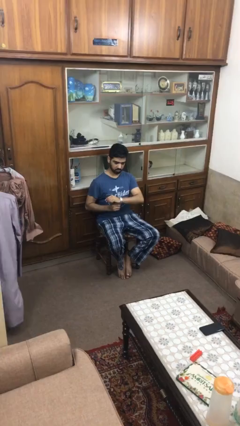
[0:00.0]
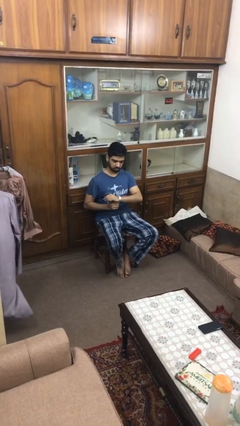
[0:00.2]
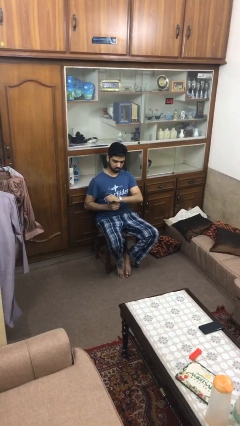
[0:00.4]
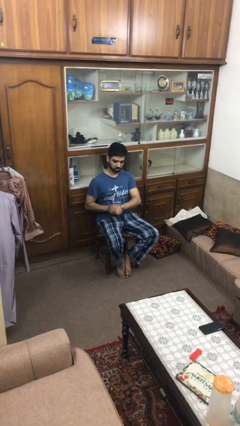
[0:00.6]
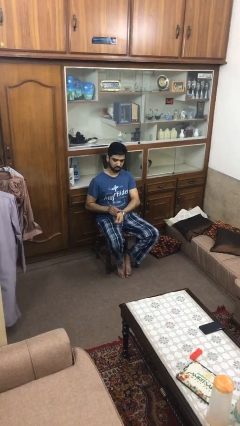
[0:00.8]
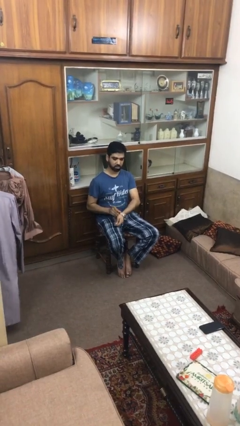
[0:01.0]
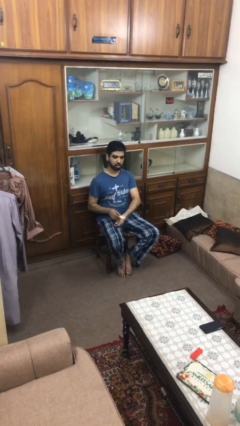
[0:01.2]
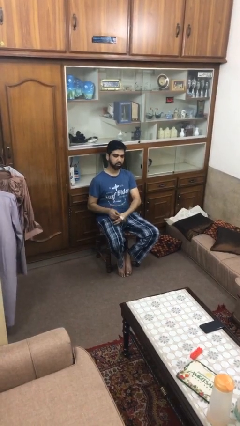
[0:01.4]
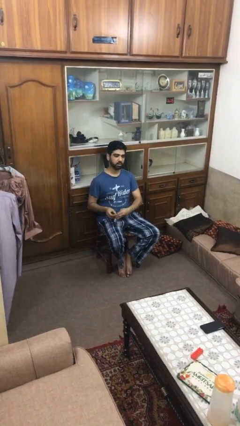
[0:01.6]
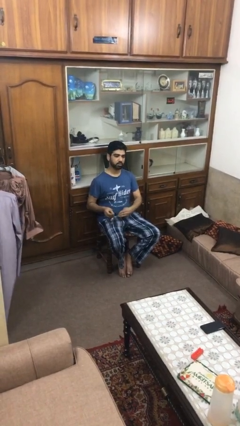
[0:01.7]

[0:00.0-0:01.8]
person takes off wristwatch

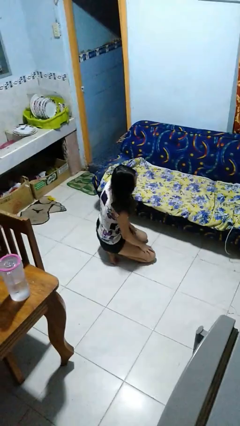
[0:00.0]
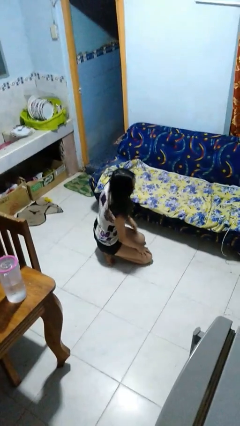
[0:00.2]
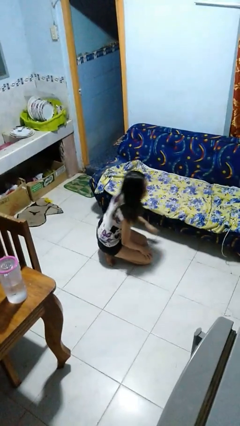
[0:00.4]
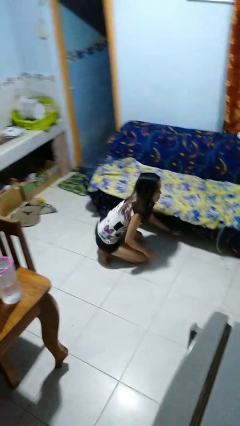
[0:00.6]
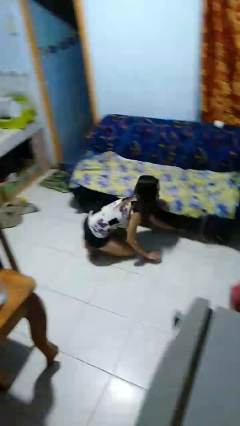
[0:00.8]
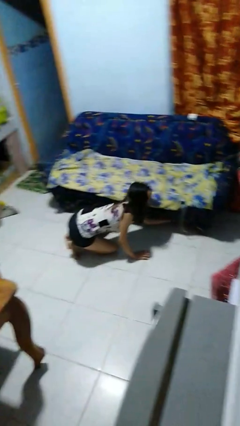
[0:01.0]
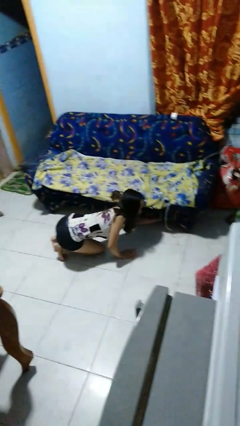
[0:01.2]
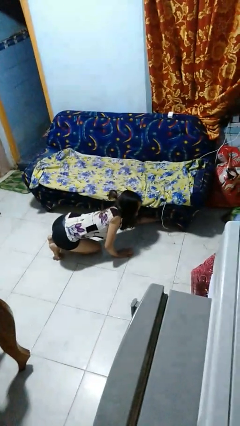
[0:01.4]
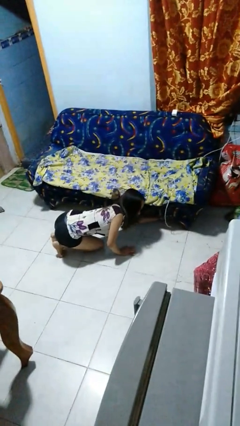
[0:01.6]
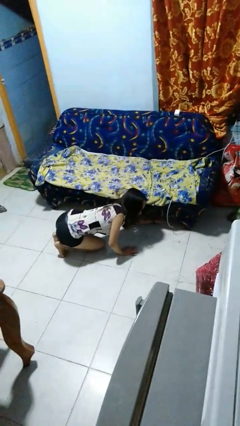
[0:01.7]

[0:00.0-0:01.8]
person searches under couch

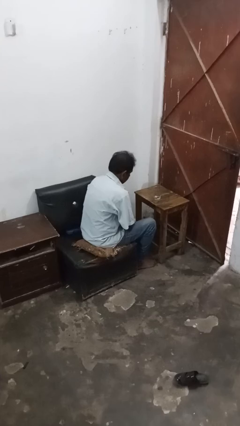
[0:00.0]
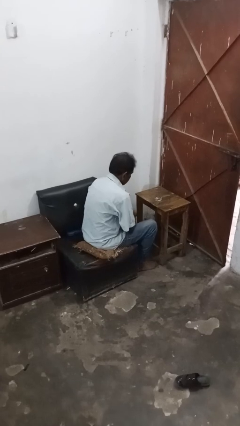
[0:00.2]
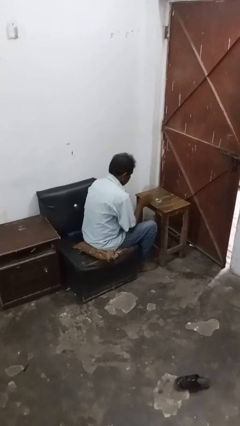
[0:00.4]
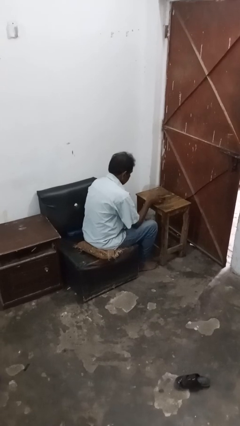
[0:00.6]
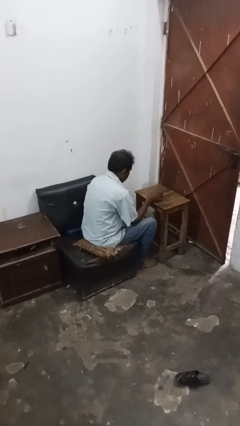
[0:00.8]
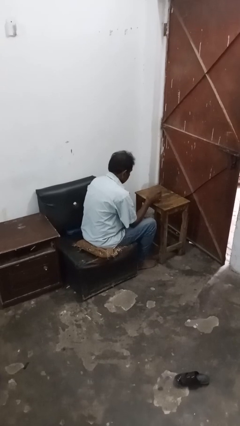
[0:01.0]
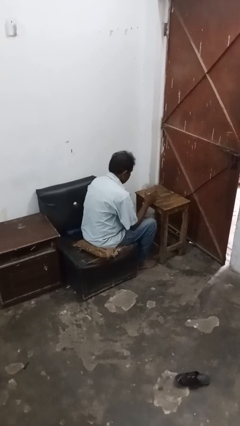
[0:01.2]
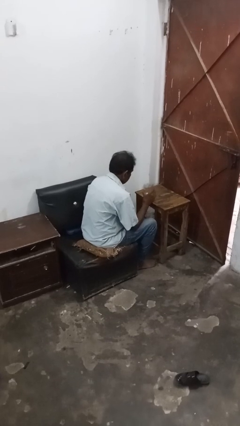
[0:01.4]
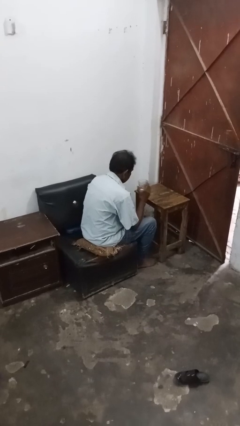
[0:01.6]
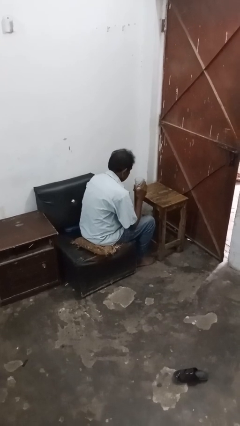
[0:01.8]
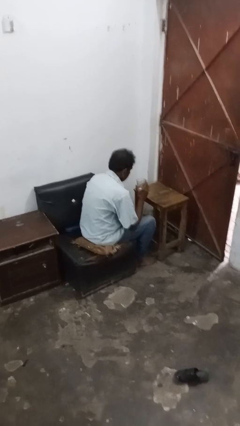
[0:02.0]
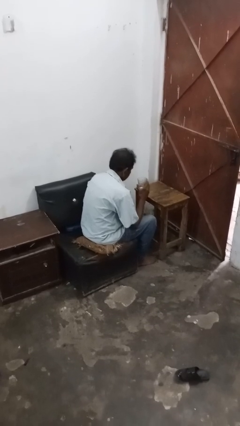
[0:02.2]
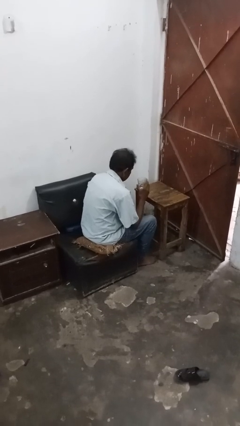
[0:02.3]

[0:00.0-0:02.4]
person picks up object from table

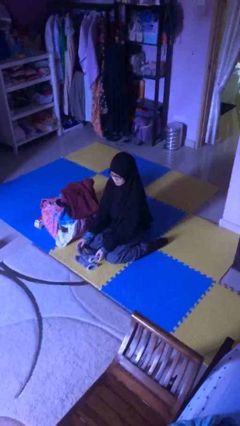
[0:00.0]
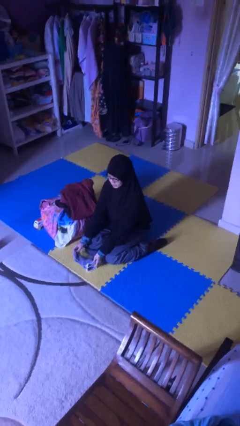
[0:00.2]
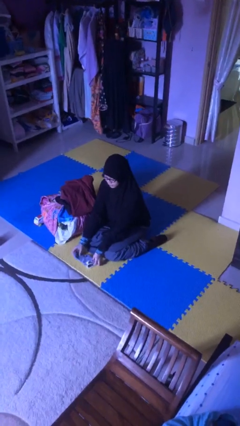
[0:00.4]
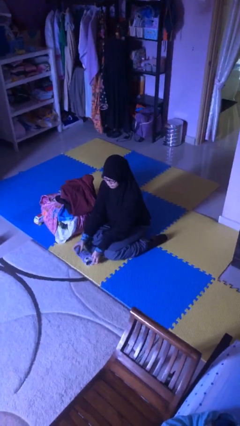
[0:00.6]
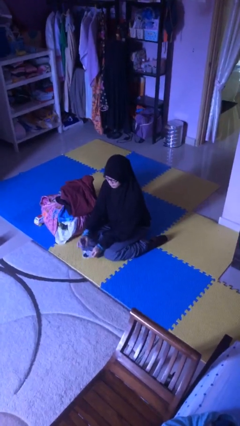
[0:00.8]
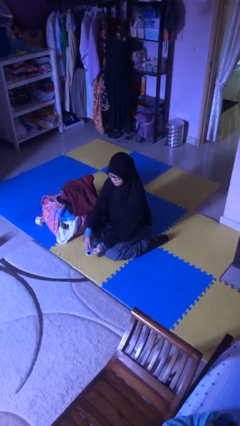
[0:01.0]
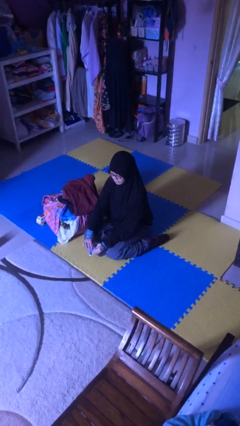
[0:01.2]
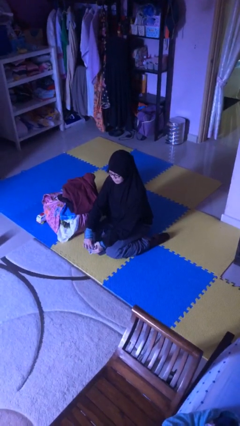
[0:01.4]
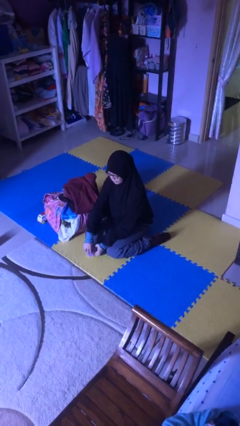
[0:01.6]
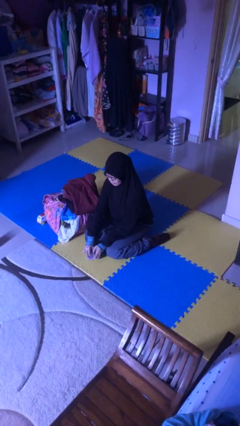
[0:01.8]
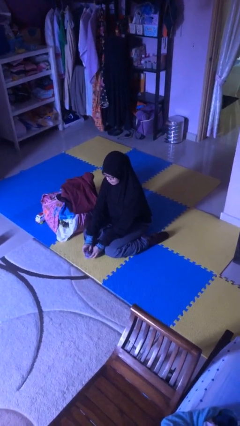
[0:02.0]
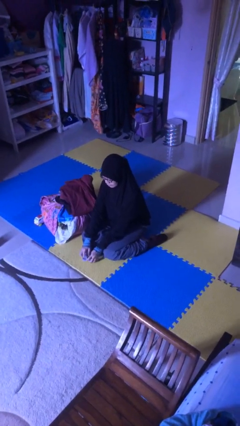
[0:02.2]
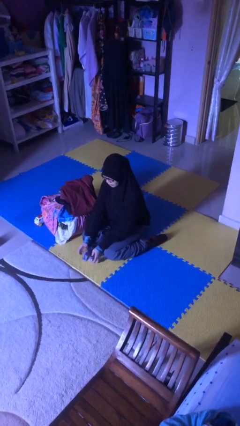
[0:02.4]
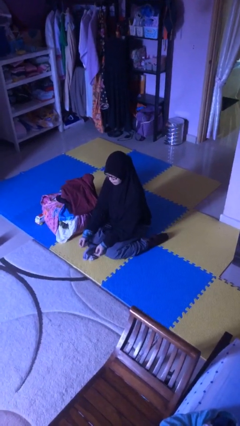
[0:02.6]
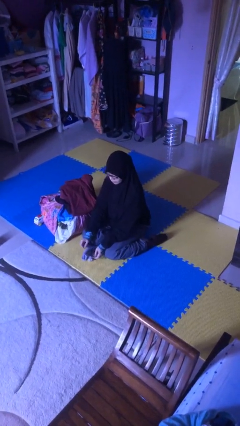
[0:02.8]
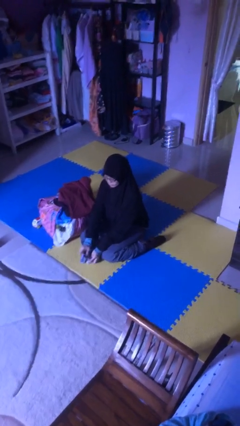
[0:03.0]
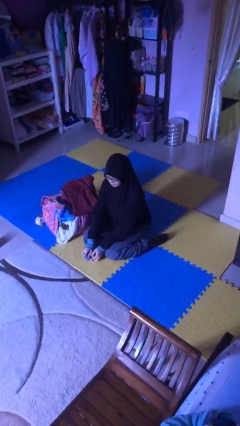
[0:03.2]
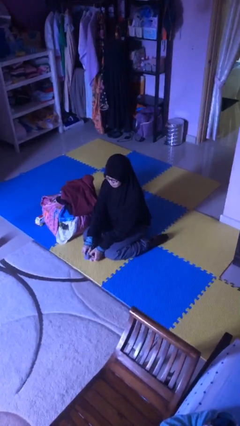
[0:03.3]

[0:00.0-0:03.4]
person folds socks

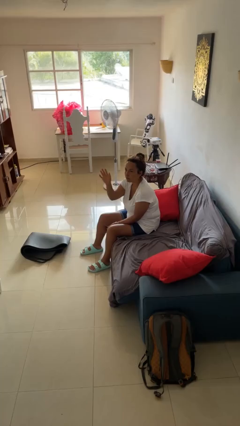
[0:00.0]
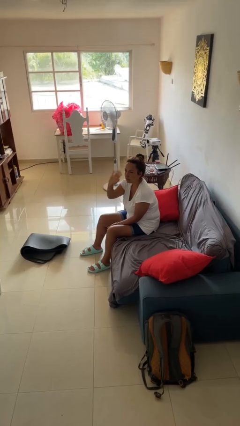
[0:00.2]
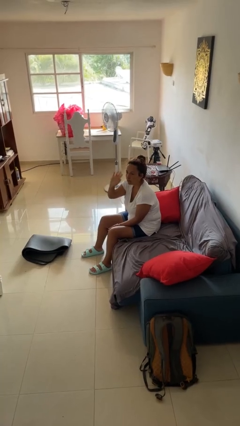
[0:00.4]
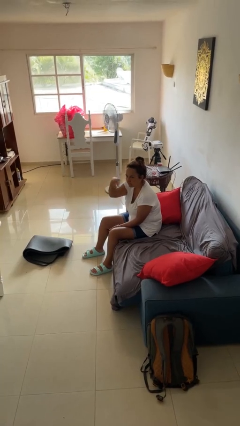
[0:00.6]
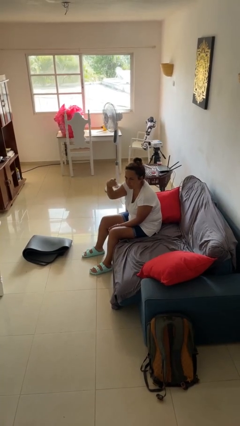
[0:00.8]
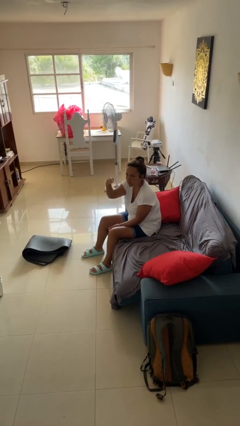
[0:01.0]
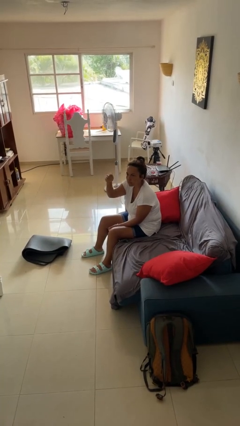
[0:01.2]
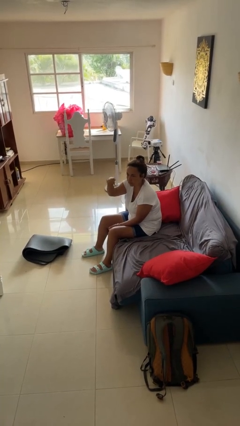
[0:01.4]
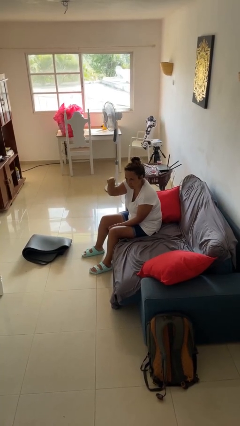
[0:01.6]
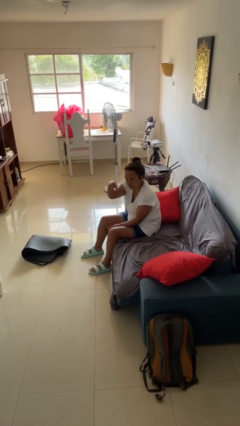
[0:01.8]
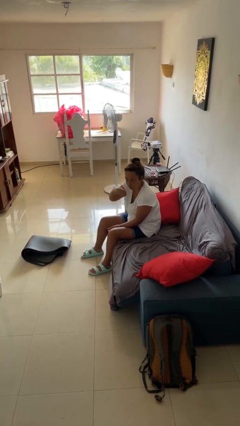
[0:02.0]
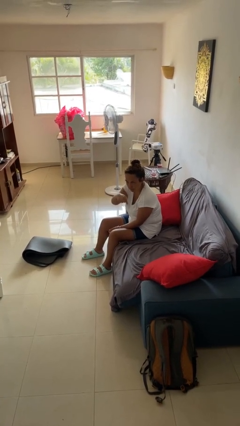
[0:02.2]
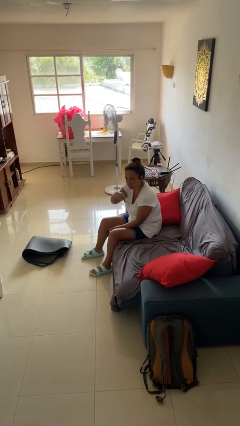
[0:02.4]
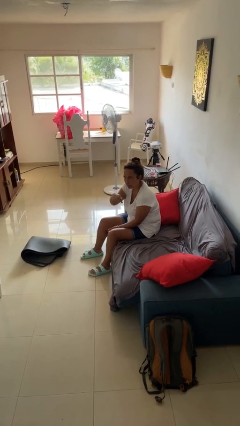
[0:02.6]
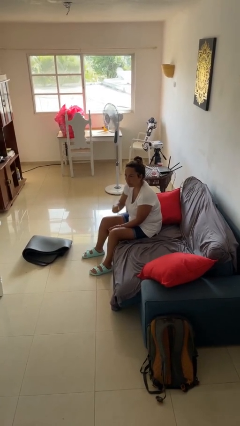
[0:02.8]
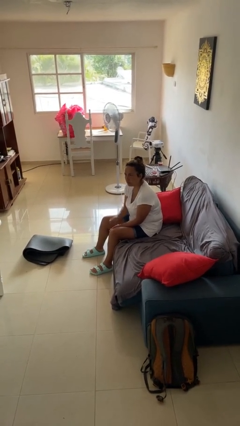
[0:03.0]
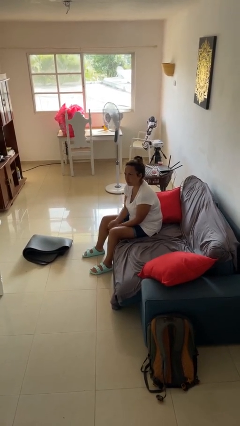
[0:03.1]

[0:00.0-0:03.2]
person gestures come here

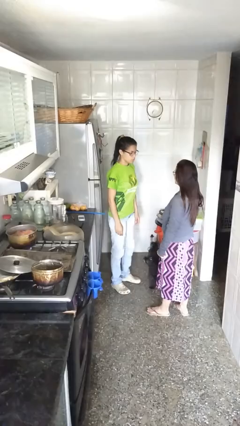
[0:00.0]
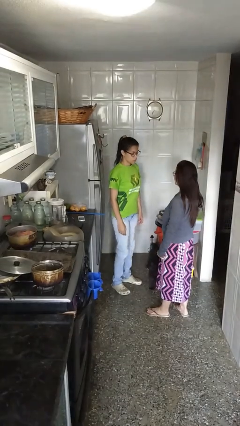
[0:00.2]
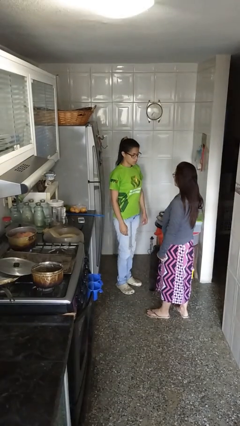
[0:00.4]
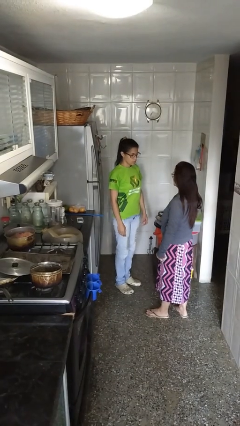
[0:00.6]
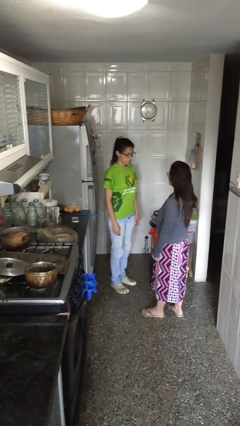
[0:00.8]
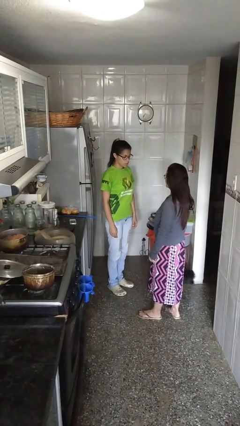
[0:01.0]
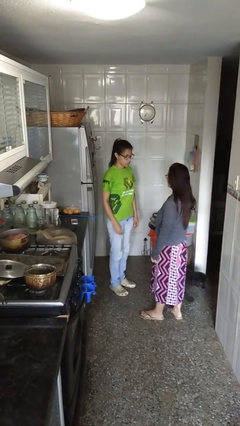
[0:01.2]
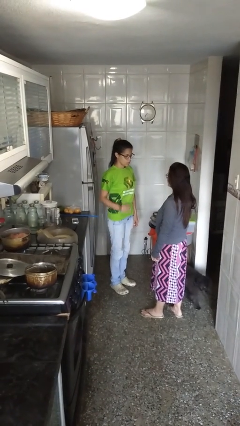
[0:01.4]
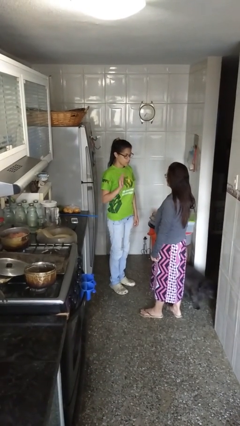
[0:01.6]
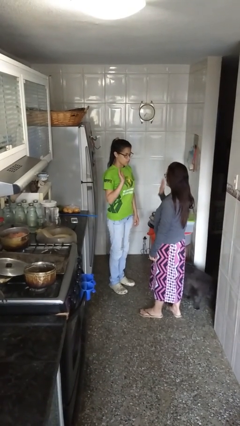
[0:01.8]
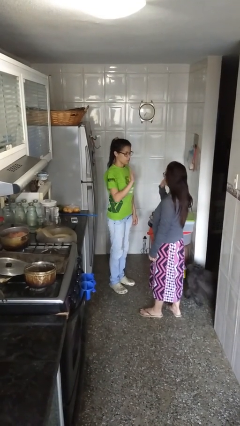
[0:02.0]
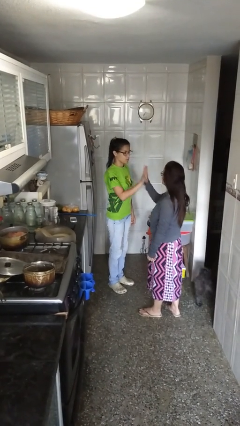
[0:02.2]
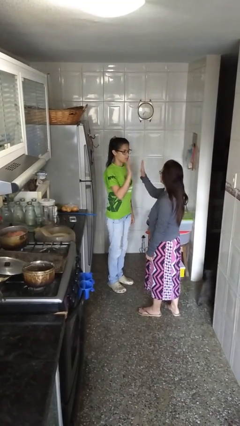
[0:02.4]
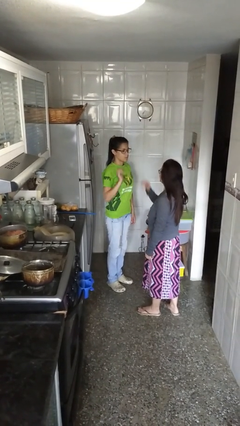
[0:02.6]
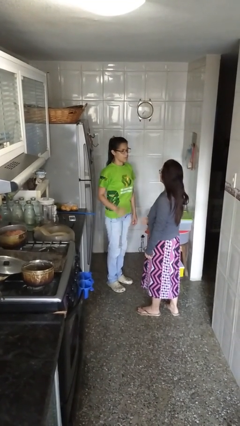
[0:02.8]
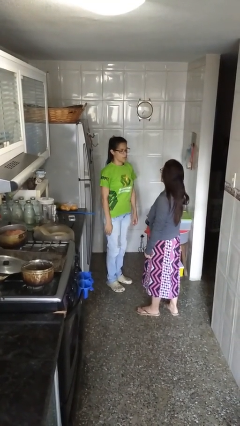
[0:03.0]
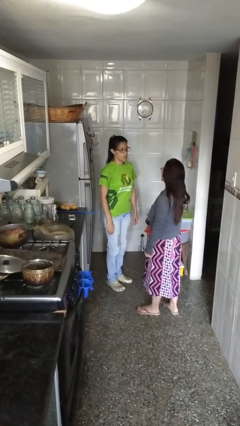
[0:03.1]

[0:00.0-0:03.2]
person highfives hand

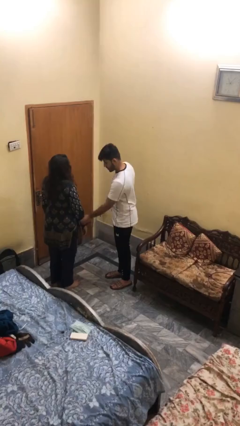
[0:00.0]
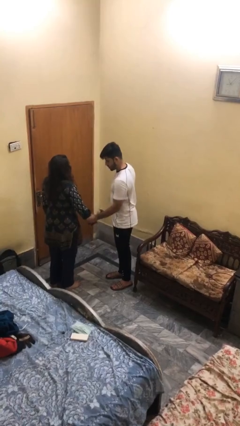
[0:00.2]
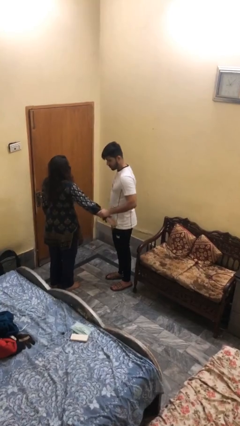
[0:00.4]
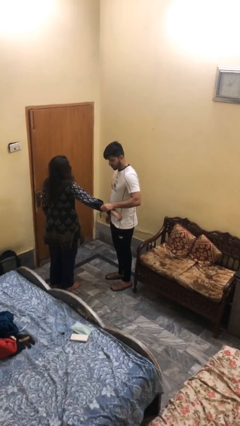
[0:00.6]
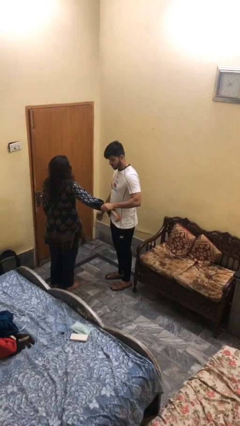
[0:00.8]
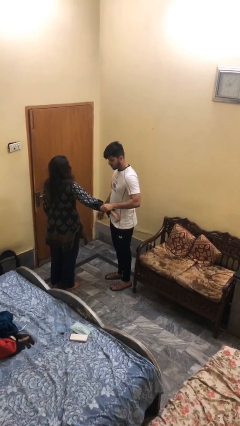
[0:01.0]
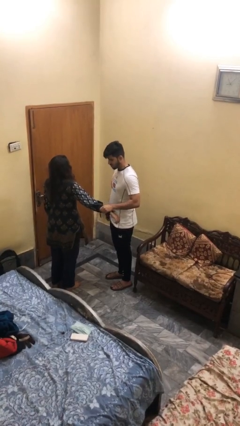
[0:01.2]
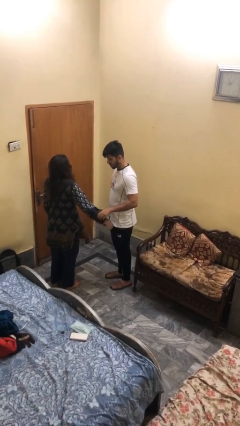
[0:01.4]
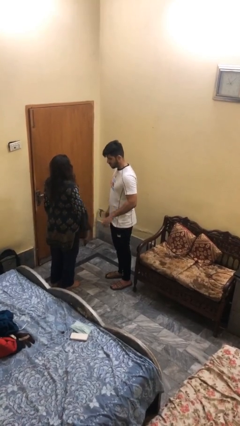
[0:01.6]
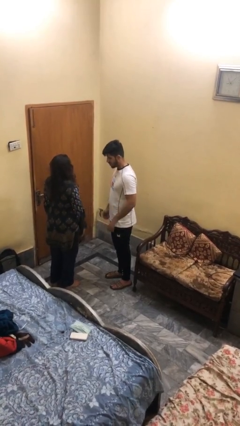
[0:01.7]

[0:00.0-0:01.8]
person grabs person by forearm
